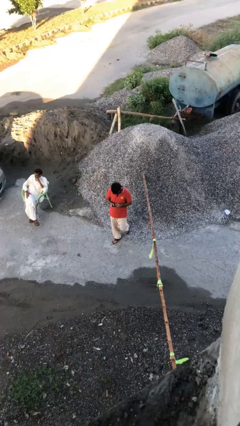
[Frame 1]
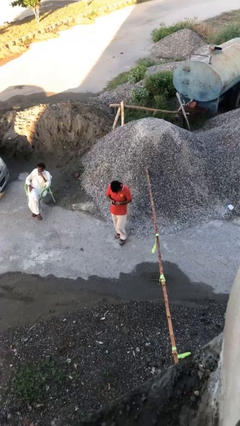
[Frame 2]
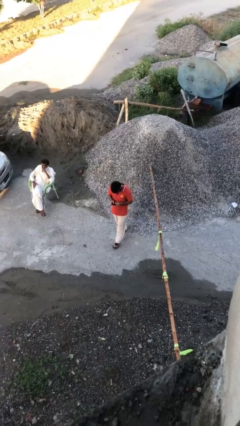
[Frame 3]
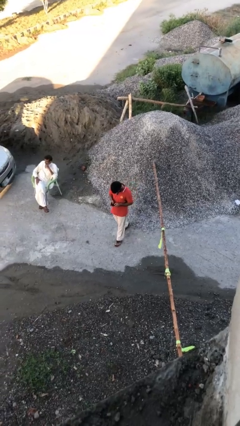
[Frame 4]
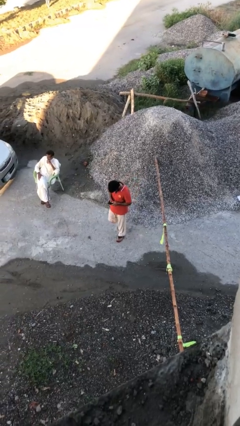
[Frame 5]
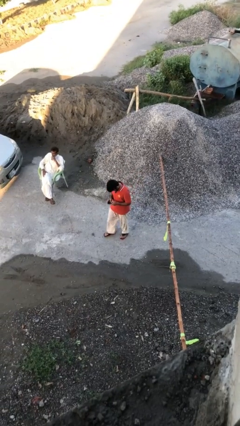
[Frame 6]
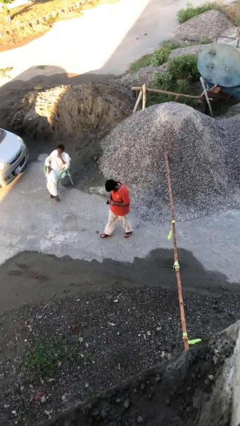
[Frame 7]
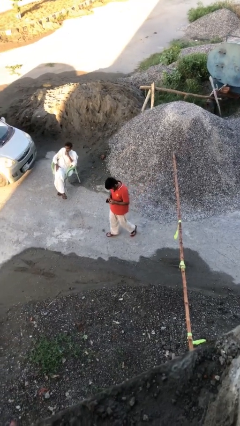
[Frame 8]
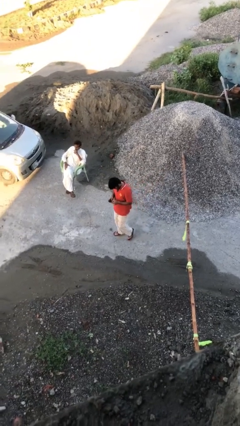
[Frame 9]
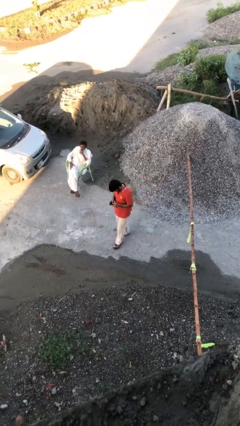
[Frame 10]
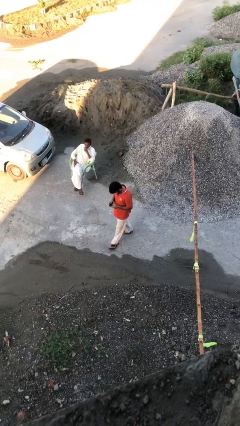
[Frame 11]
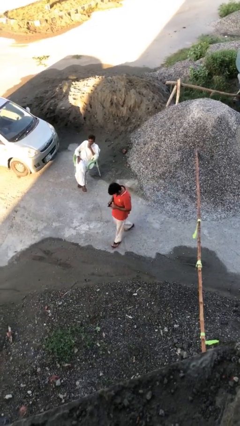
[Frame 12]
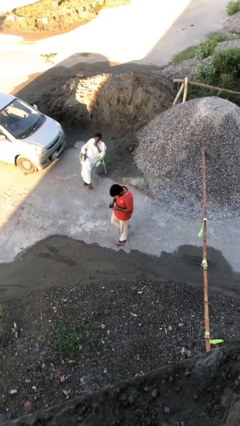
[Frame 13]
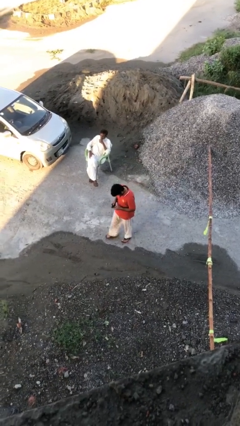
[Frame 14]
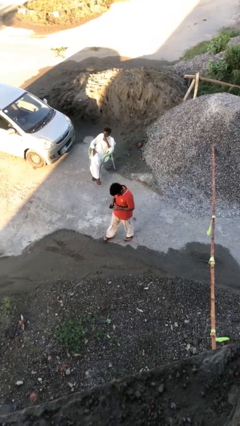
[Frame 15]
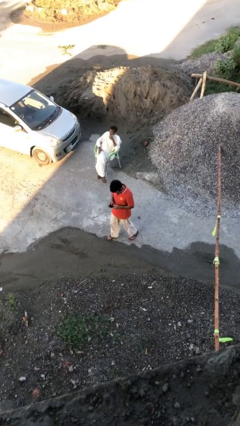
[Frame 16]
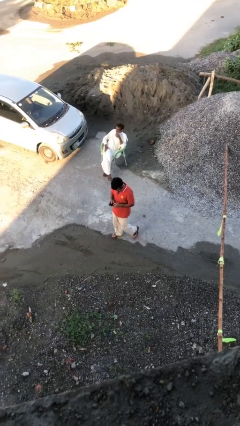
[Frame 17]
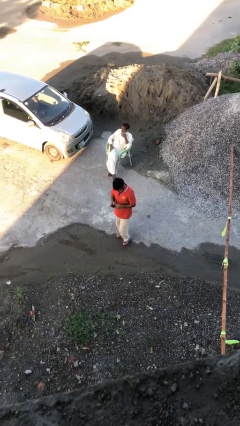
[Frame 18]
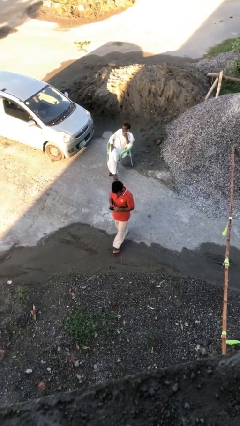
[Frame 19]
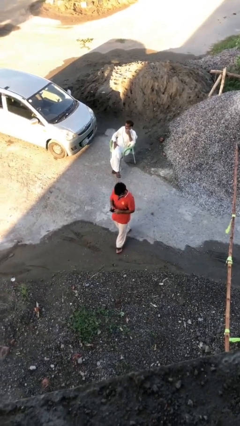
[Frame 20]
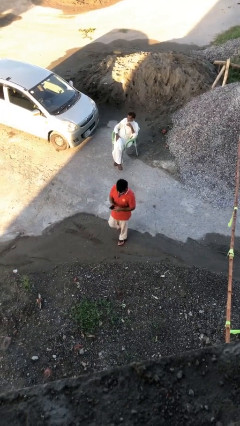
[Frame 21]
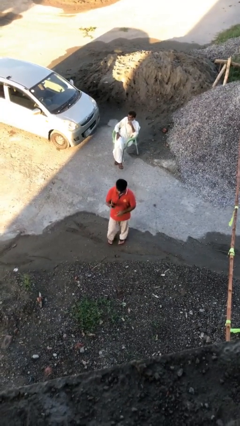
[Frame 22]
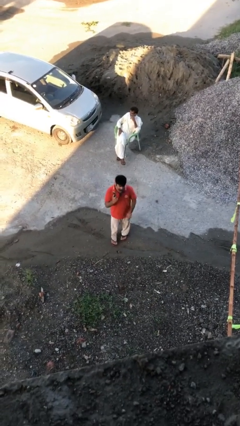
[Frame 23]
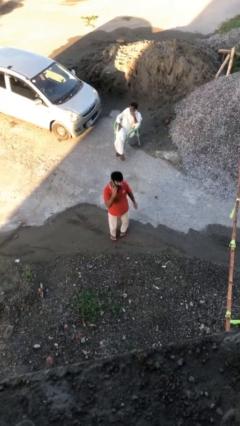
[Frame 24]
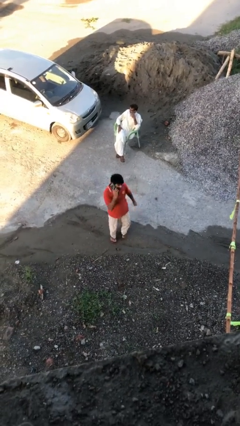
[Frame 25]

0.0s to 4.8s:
person texts on phone

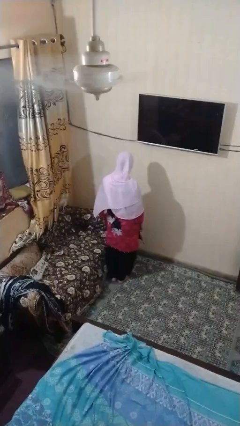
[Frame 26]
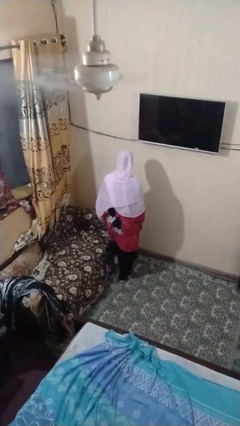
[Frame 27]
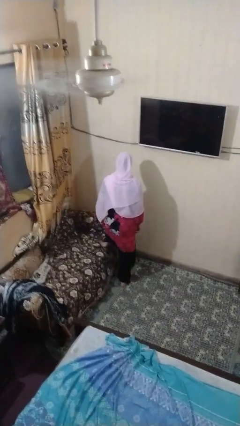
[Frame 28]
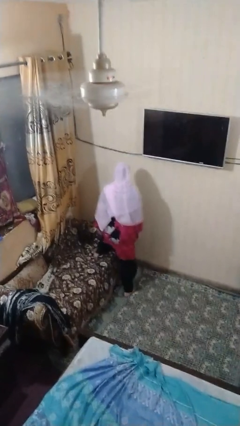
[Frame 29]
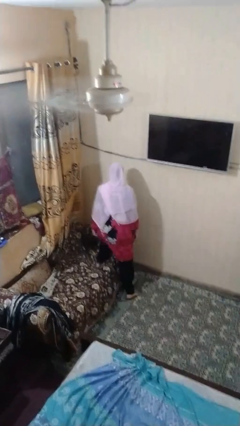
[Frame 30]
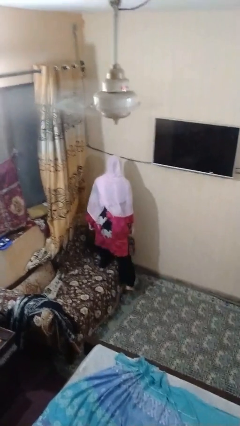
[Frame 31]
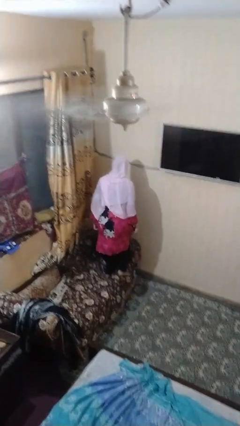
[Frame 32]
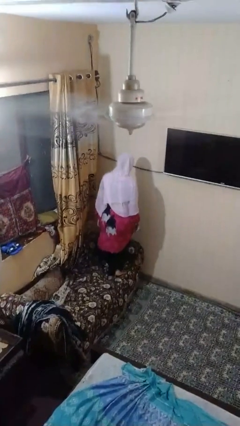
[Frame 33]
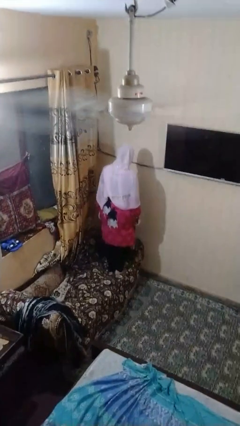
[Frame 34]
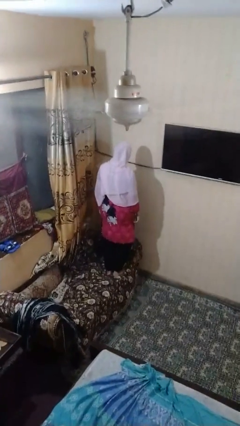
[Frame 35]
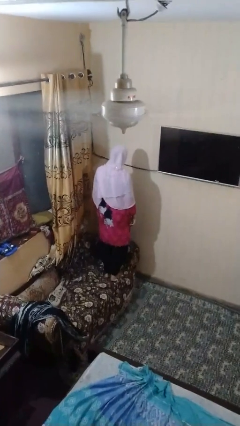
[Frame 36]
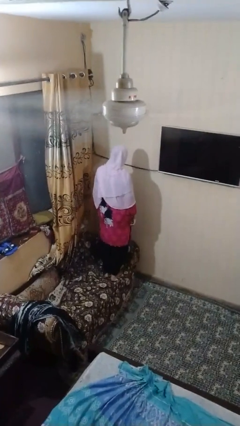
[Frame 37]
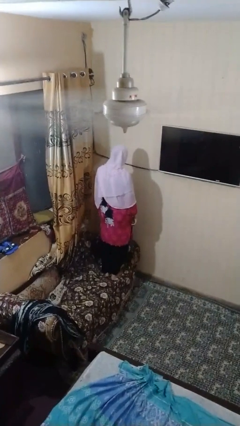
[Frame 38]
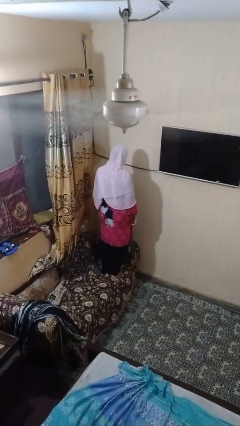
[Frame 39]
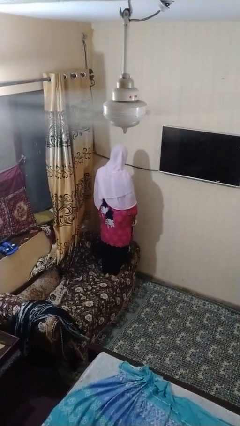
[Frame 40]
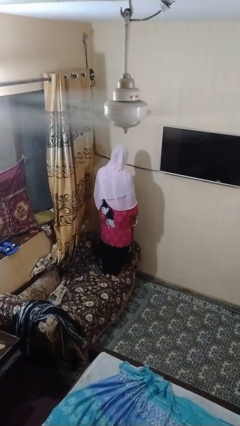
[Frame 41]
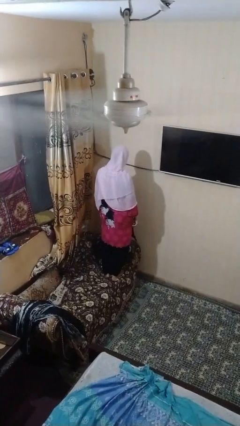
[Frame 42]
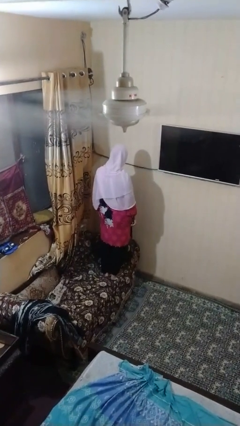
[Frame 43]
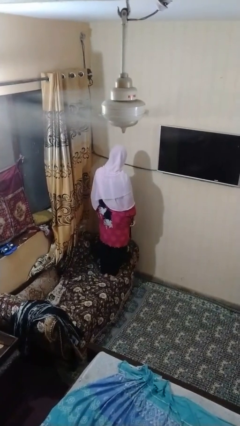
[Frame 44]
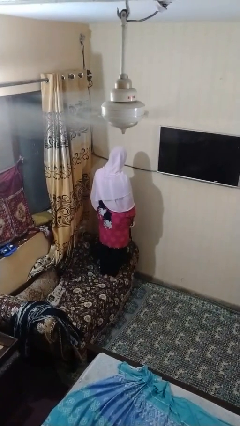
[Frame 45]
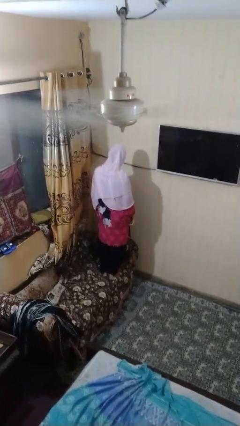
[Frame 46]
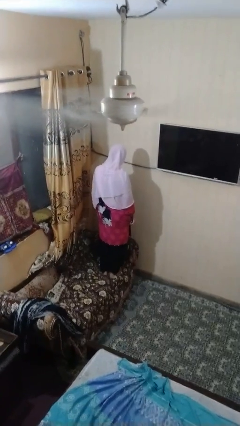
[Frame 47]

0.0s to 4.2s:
person climbs on couch

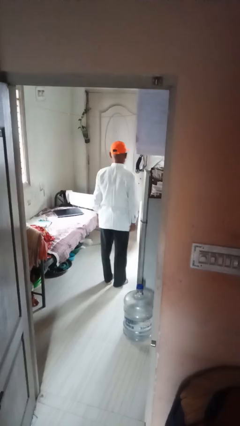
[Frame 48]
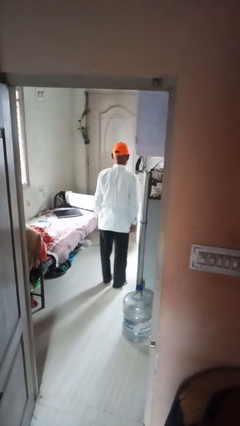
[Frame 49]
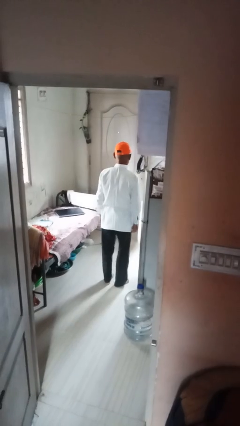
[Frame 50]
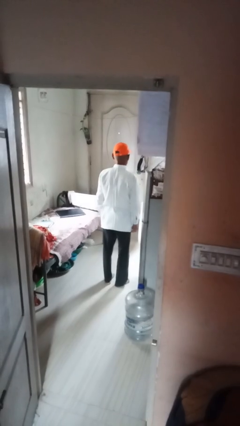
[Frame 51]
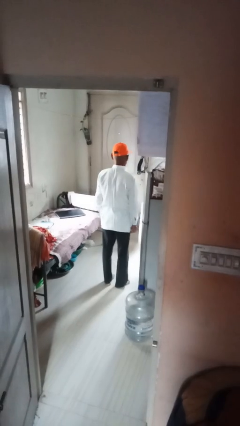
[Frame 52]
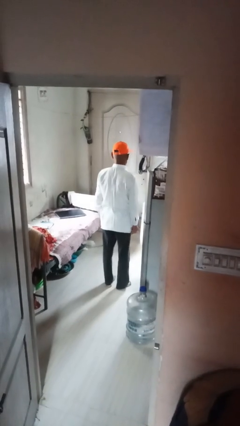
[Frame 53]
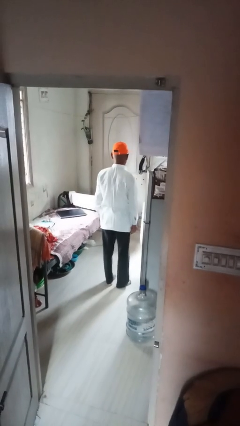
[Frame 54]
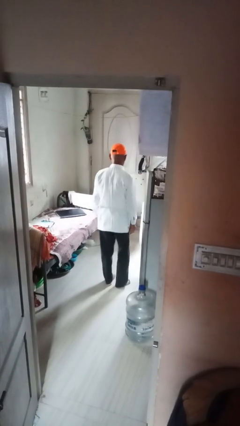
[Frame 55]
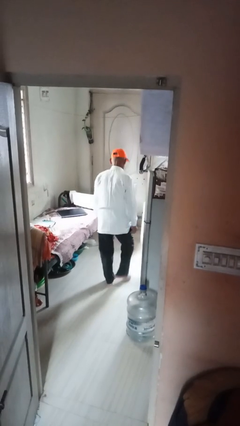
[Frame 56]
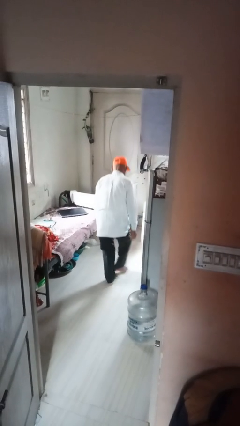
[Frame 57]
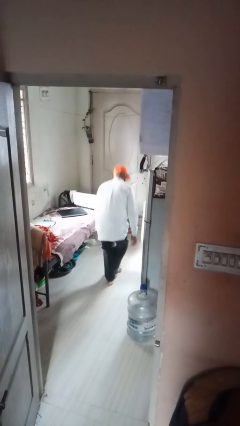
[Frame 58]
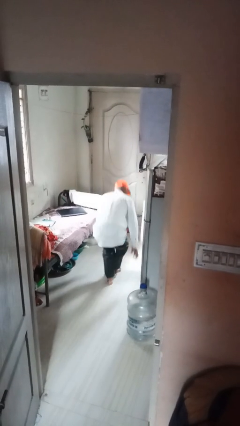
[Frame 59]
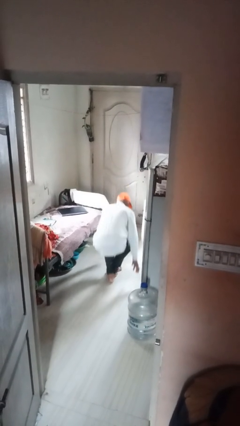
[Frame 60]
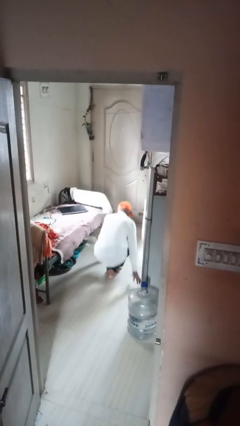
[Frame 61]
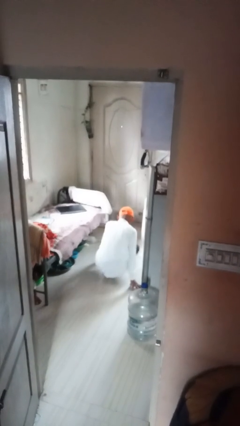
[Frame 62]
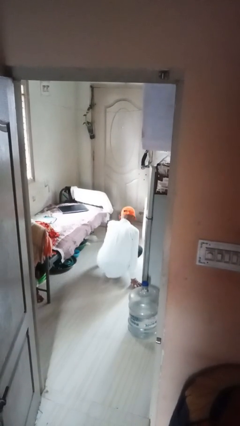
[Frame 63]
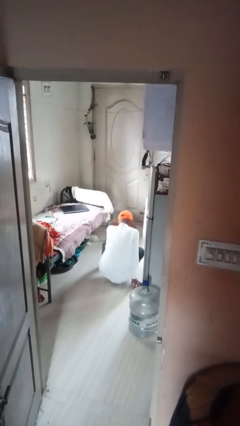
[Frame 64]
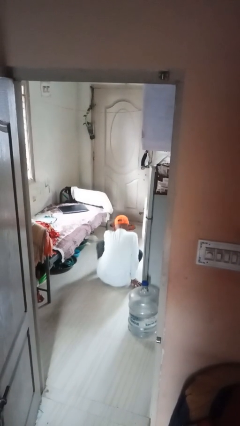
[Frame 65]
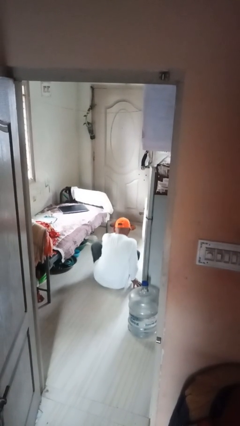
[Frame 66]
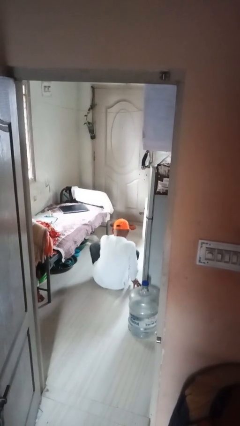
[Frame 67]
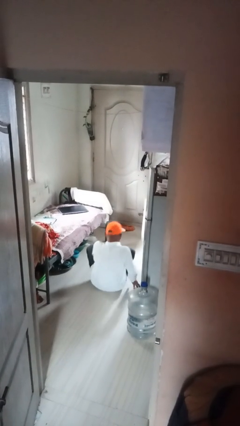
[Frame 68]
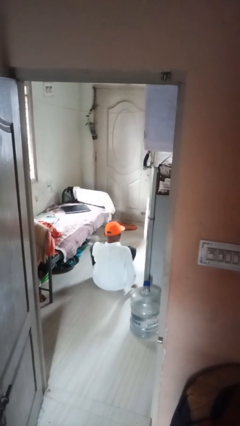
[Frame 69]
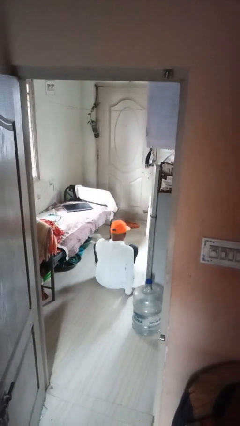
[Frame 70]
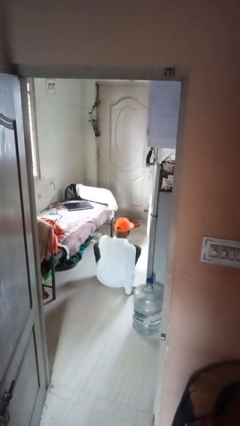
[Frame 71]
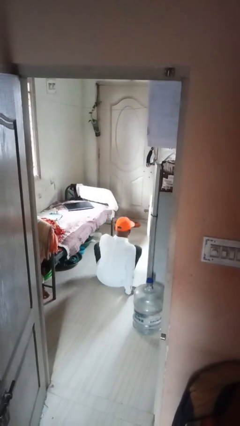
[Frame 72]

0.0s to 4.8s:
person sits crisscross

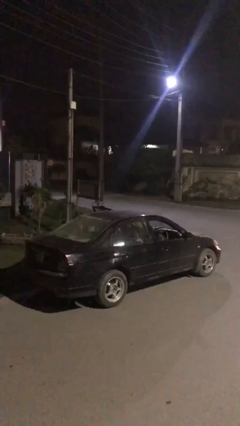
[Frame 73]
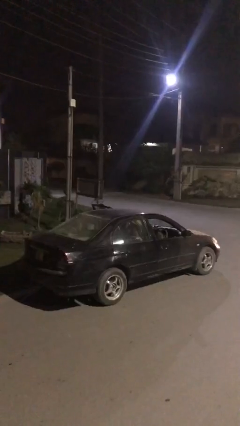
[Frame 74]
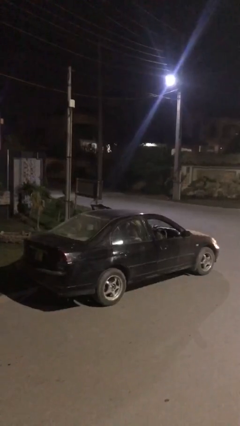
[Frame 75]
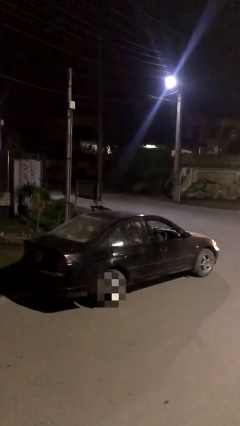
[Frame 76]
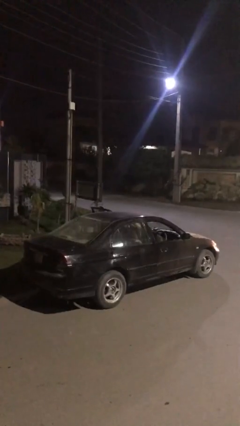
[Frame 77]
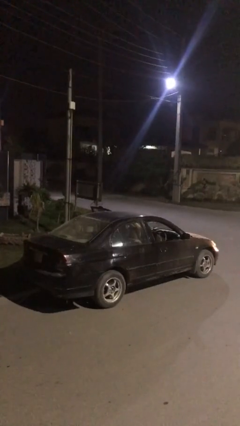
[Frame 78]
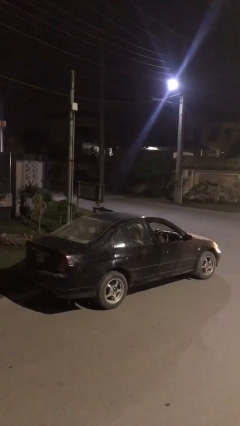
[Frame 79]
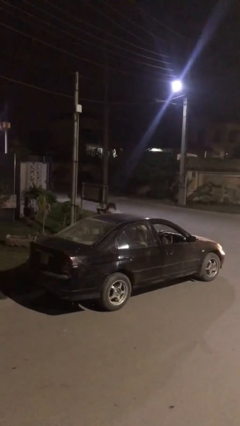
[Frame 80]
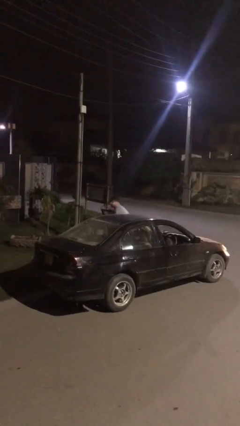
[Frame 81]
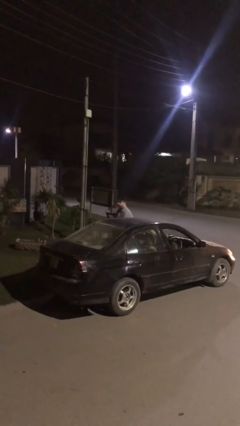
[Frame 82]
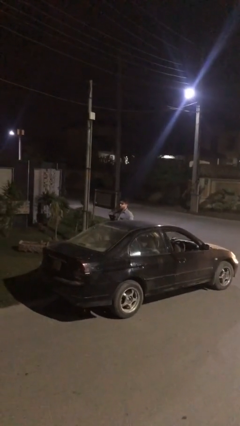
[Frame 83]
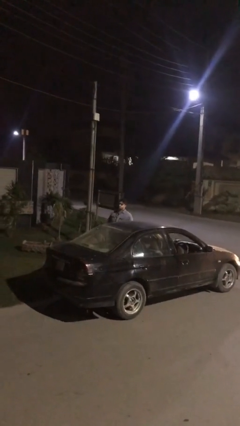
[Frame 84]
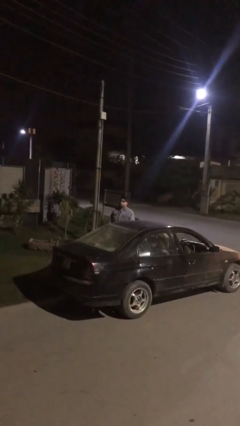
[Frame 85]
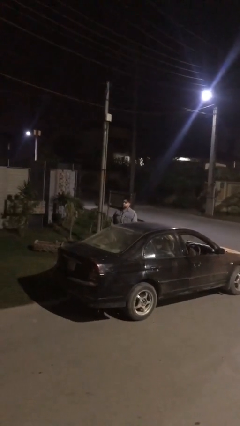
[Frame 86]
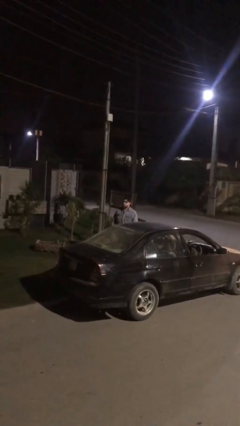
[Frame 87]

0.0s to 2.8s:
person exits car

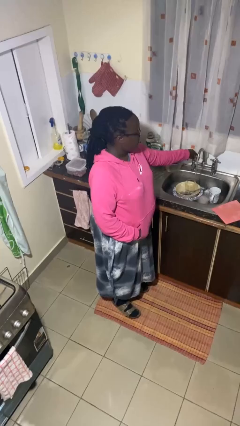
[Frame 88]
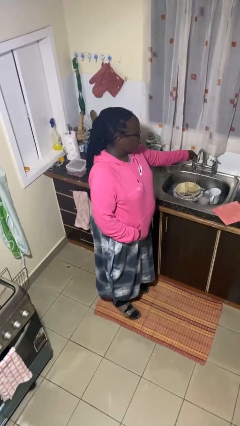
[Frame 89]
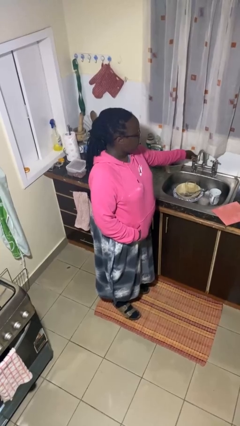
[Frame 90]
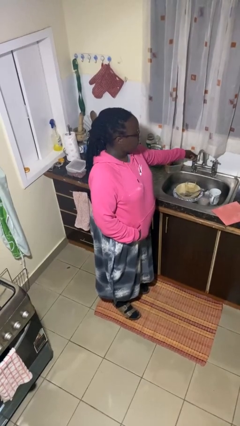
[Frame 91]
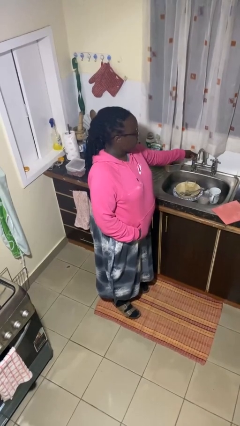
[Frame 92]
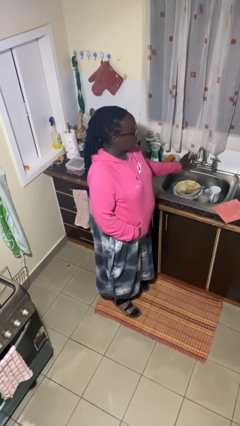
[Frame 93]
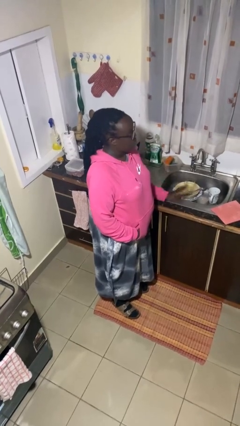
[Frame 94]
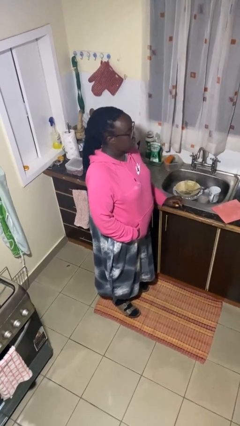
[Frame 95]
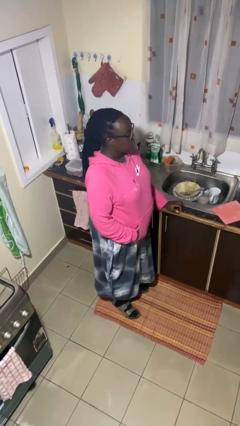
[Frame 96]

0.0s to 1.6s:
person turns off faucet
